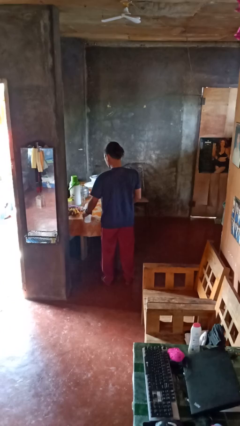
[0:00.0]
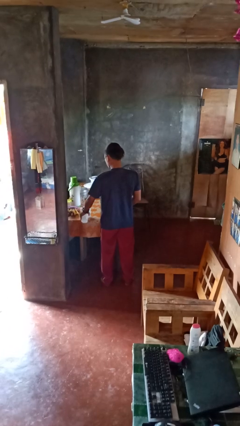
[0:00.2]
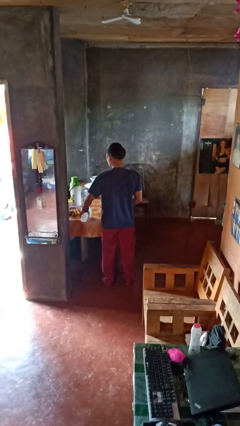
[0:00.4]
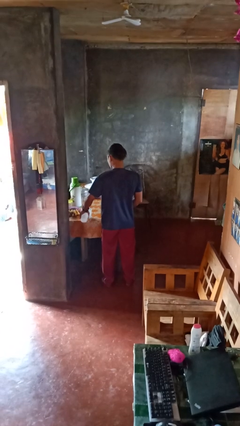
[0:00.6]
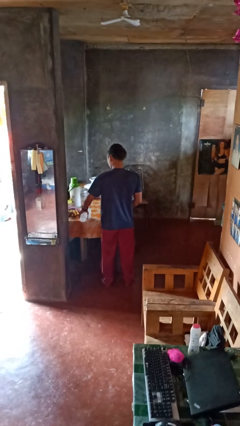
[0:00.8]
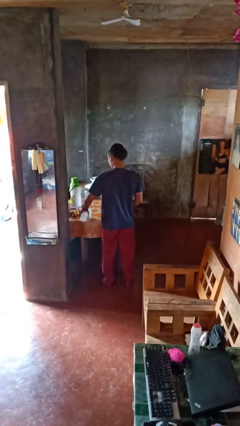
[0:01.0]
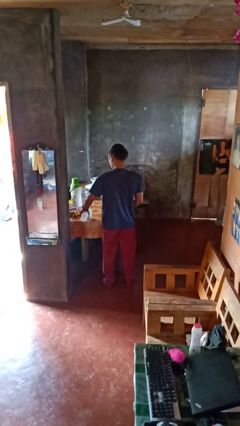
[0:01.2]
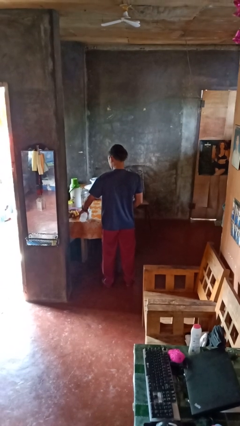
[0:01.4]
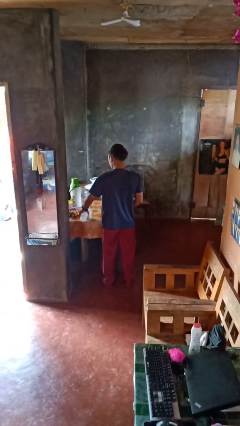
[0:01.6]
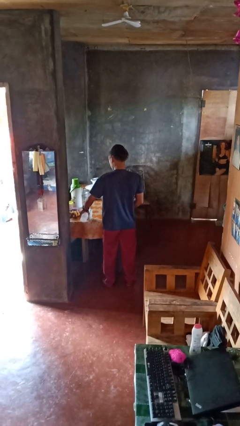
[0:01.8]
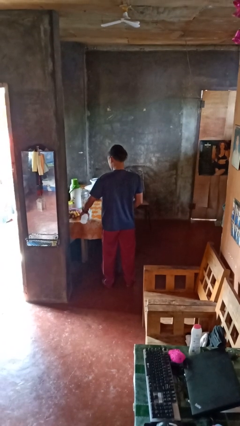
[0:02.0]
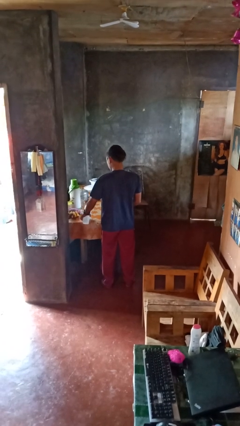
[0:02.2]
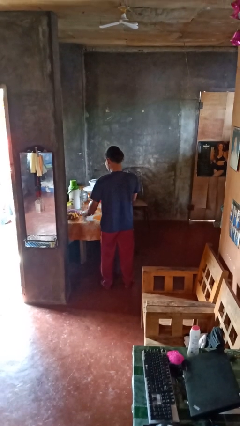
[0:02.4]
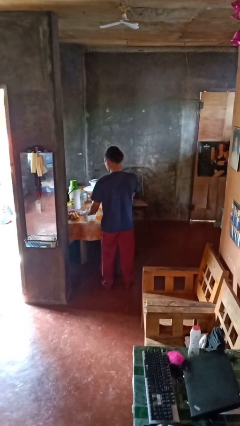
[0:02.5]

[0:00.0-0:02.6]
person pours liquid into cup

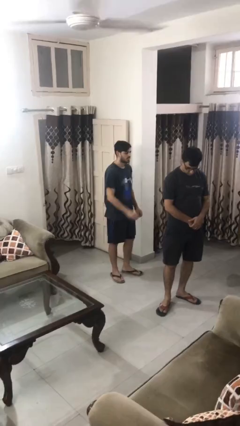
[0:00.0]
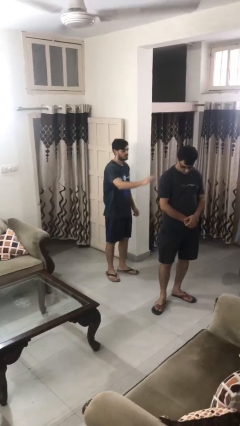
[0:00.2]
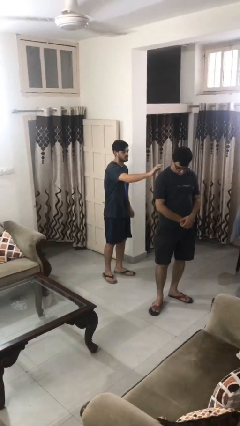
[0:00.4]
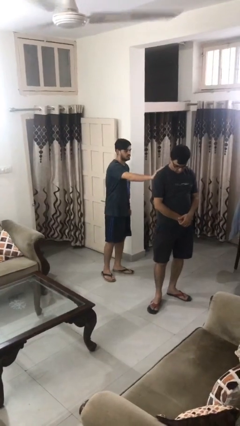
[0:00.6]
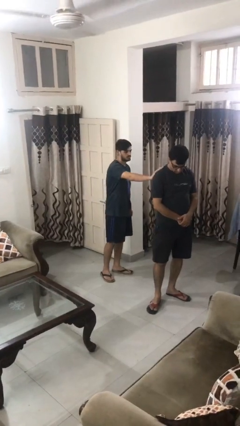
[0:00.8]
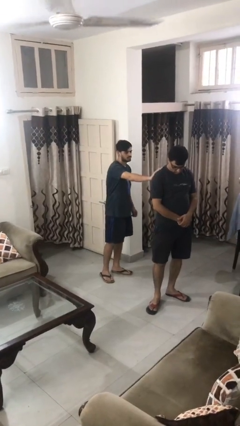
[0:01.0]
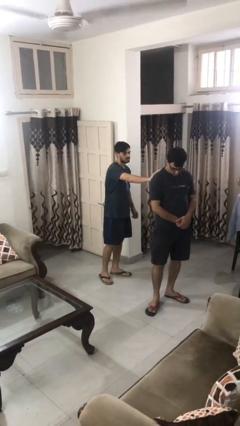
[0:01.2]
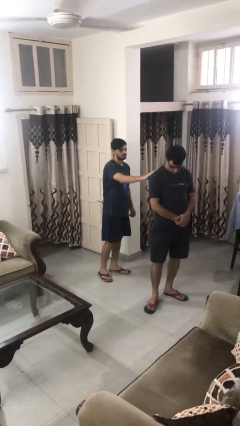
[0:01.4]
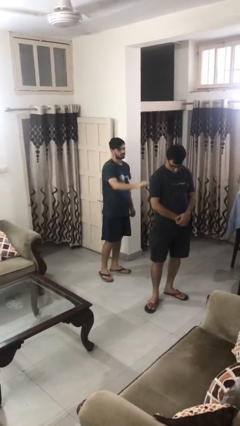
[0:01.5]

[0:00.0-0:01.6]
person touches back of person

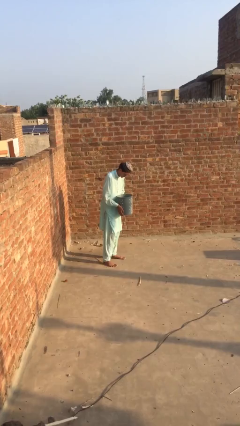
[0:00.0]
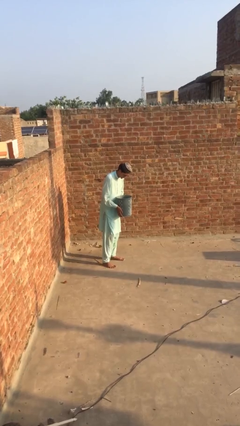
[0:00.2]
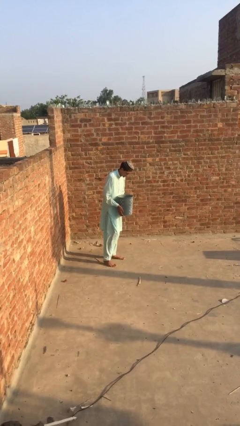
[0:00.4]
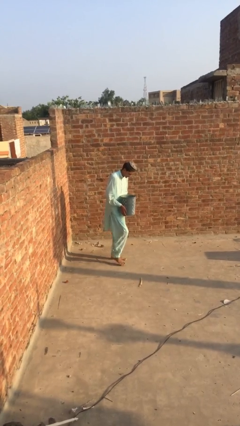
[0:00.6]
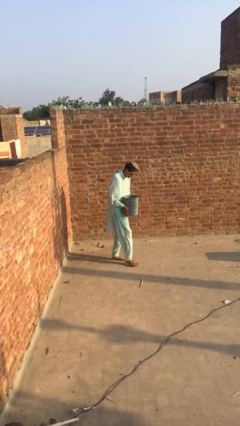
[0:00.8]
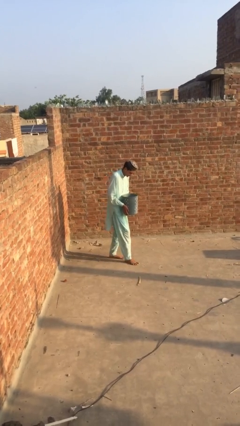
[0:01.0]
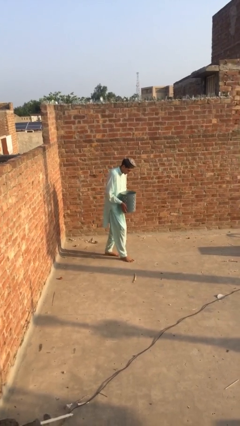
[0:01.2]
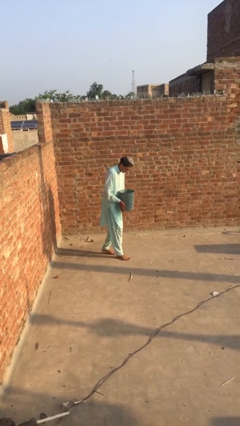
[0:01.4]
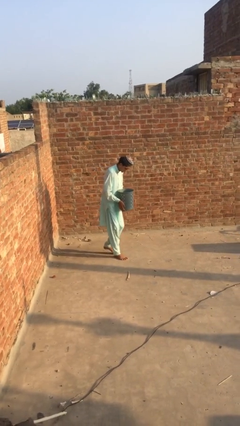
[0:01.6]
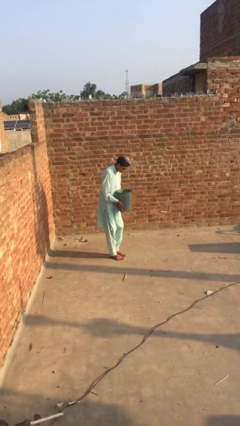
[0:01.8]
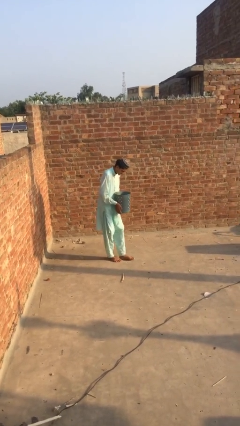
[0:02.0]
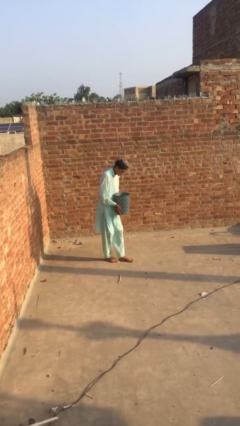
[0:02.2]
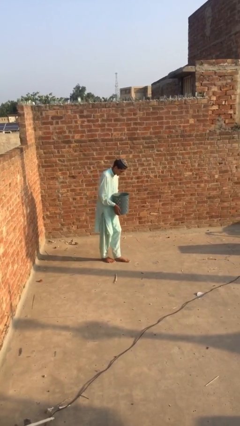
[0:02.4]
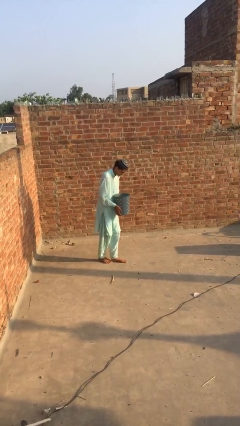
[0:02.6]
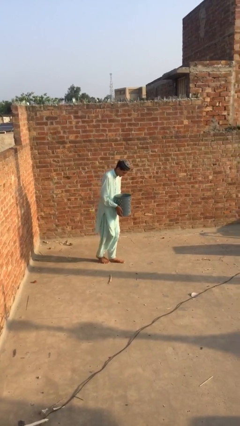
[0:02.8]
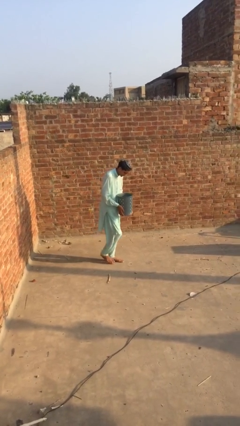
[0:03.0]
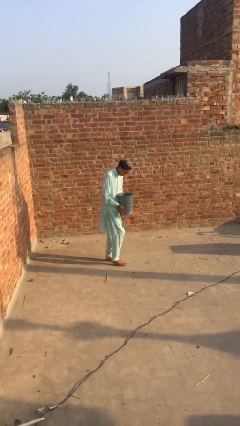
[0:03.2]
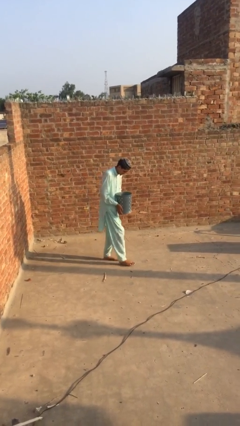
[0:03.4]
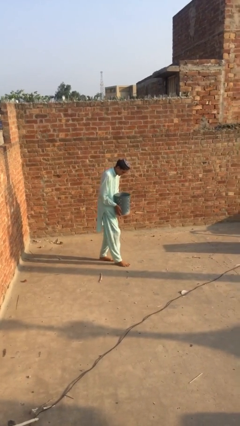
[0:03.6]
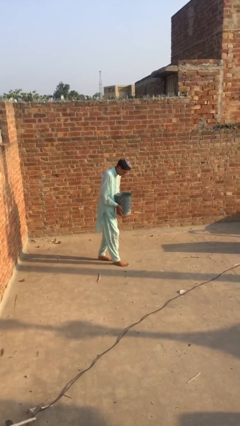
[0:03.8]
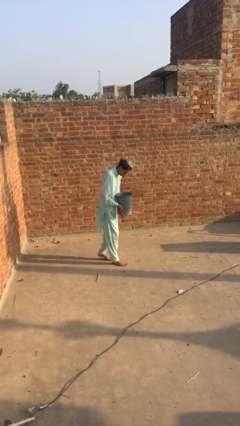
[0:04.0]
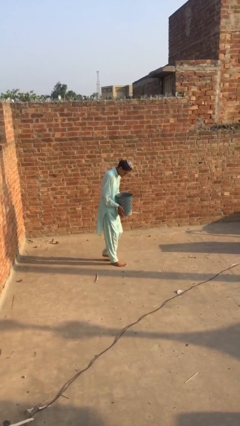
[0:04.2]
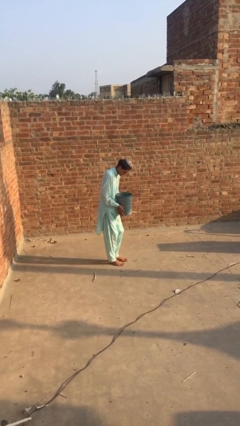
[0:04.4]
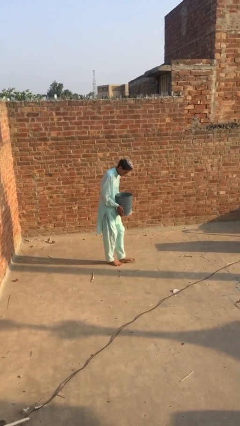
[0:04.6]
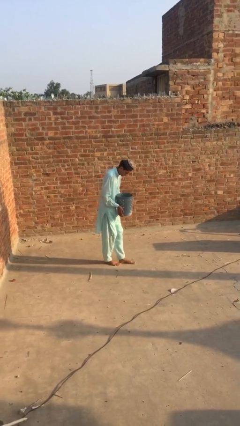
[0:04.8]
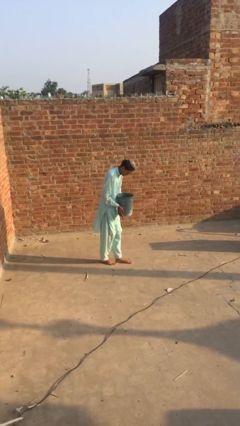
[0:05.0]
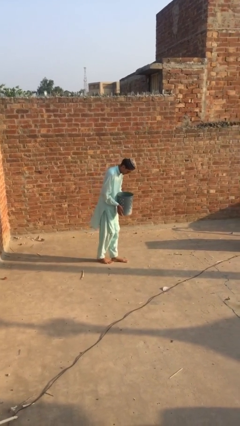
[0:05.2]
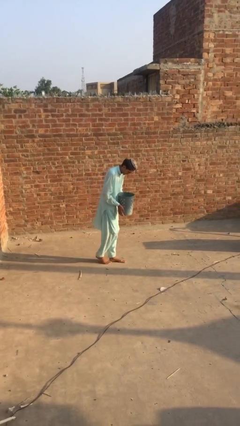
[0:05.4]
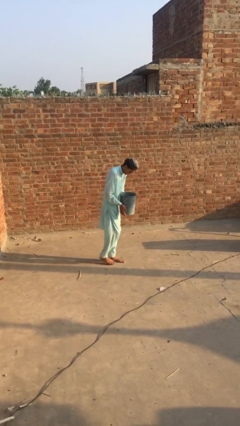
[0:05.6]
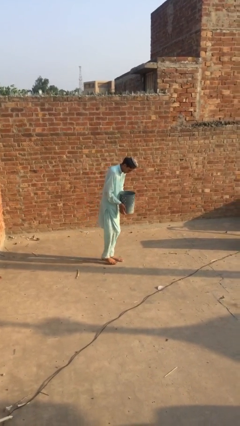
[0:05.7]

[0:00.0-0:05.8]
person carries heavy object

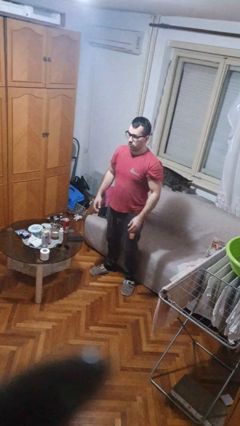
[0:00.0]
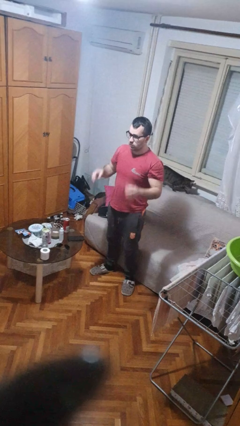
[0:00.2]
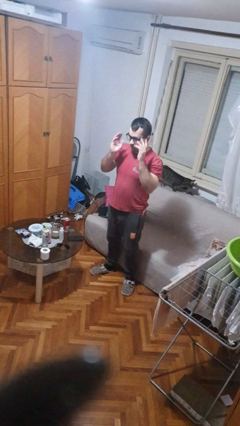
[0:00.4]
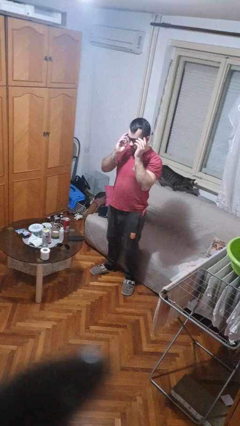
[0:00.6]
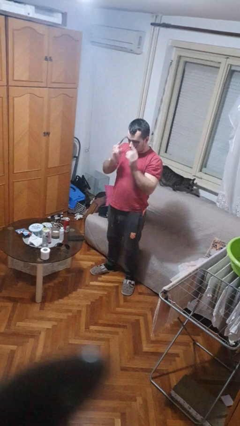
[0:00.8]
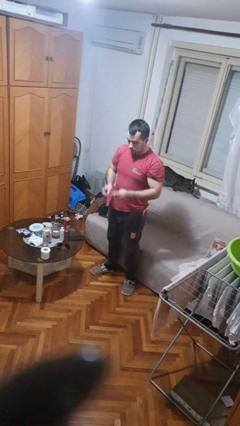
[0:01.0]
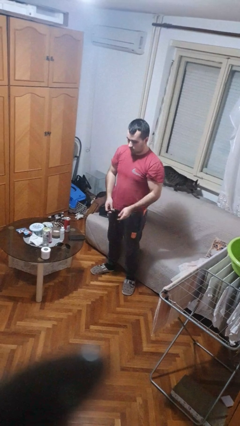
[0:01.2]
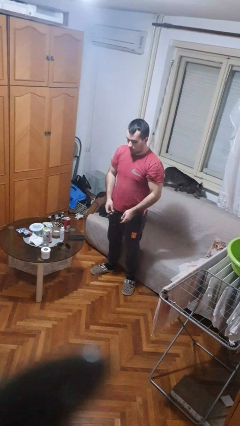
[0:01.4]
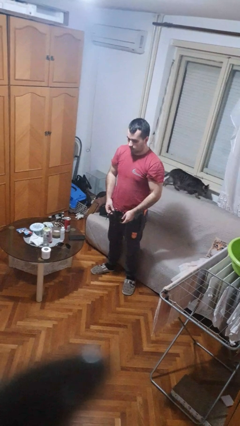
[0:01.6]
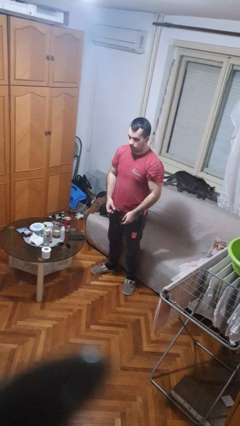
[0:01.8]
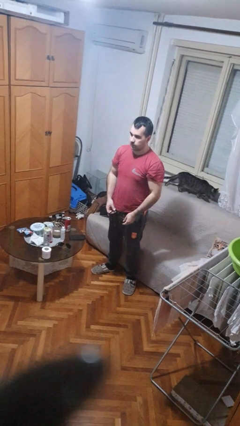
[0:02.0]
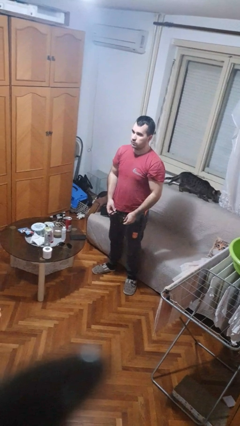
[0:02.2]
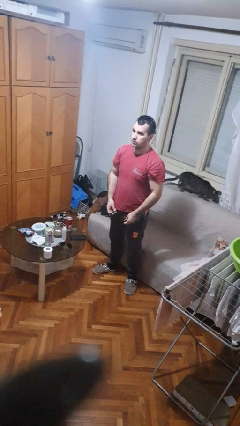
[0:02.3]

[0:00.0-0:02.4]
person takes off glasses

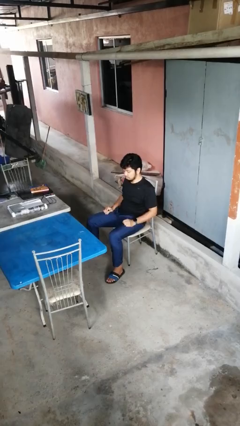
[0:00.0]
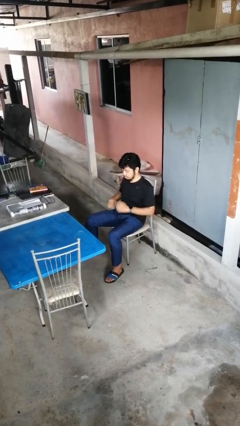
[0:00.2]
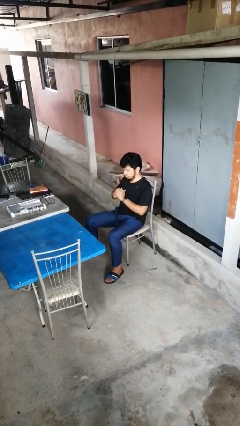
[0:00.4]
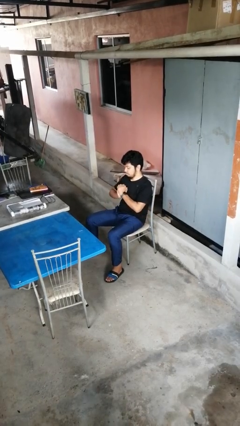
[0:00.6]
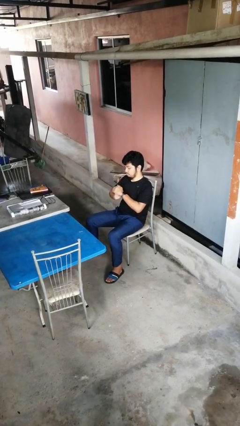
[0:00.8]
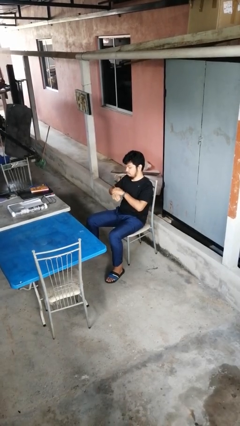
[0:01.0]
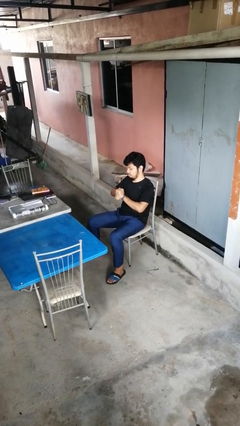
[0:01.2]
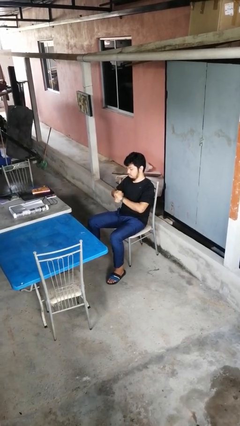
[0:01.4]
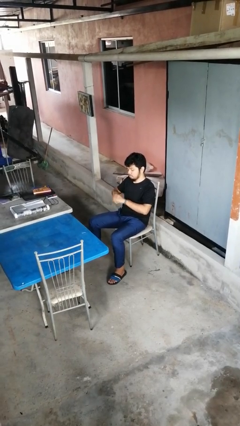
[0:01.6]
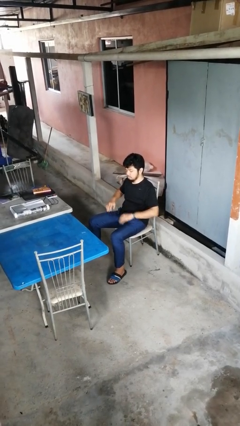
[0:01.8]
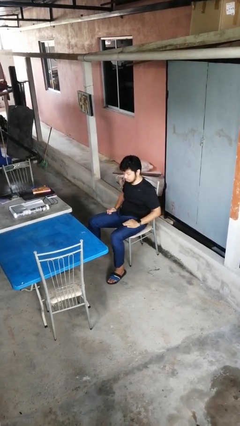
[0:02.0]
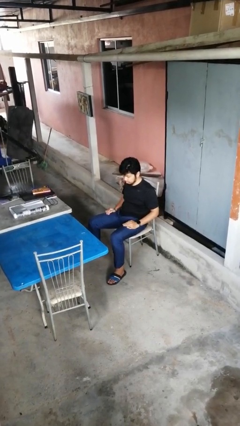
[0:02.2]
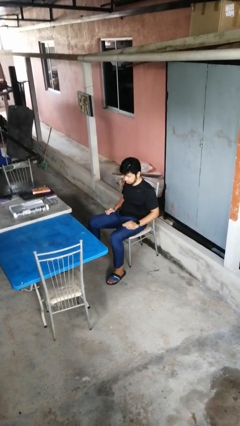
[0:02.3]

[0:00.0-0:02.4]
person cracks knuckles

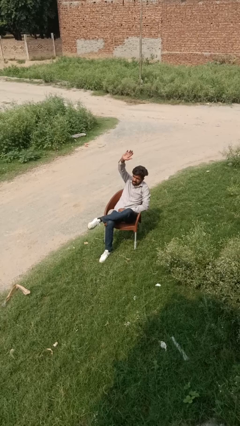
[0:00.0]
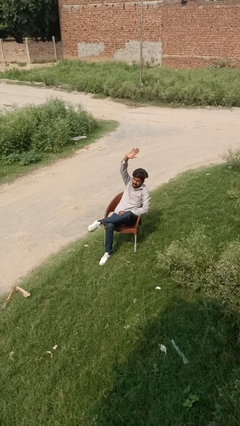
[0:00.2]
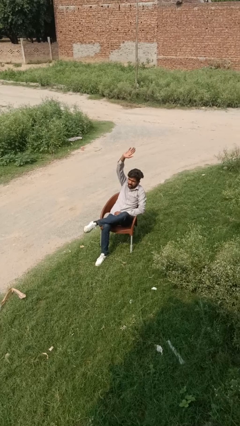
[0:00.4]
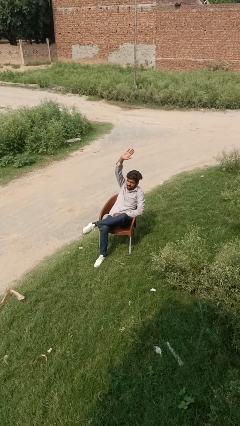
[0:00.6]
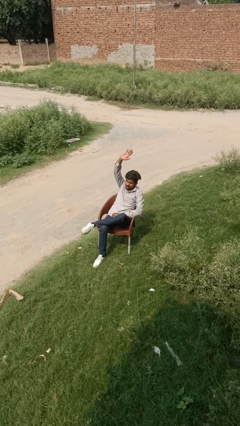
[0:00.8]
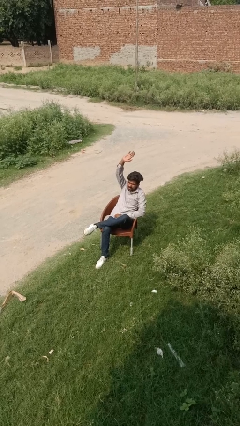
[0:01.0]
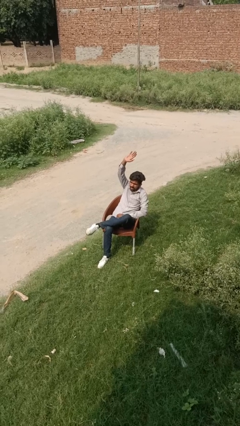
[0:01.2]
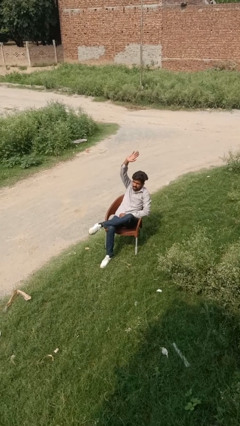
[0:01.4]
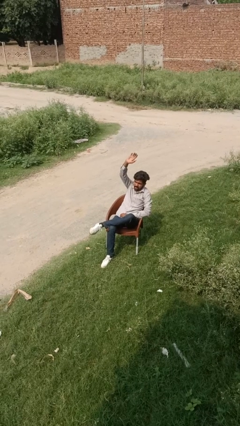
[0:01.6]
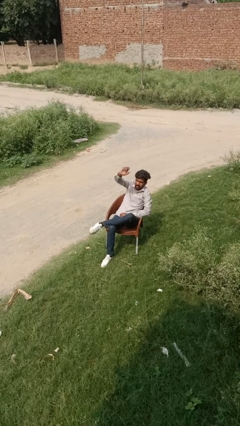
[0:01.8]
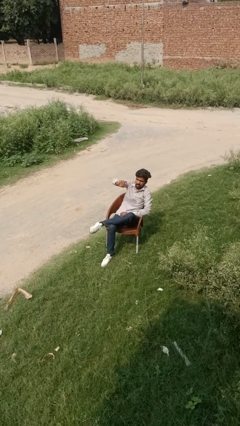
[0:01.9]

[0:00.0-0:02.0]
person gestures raise hand

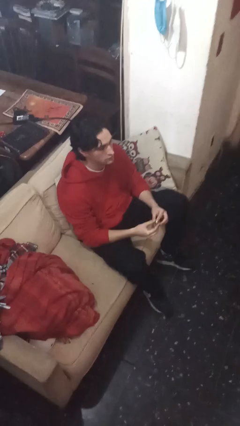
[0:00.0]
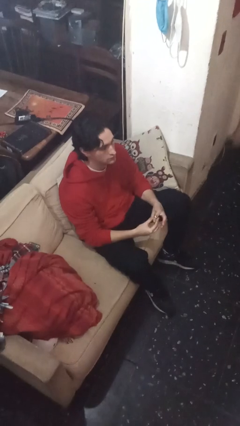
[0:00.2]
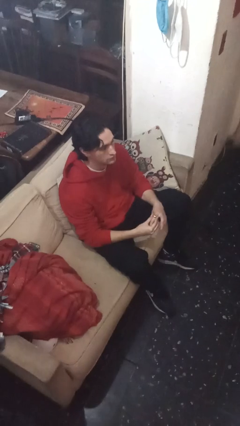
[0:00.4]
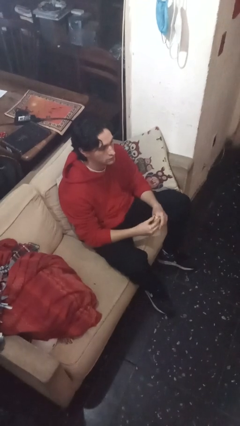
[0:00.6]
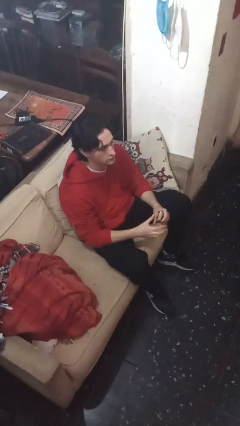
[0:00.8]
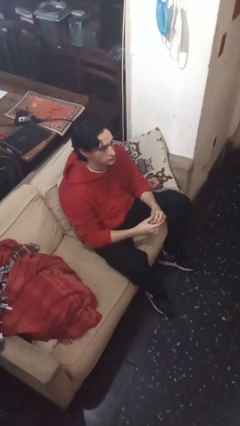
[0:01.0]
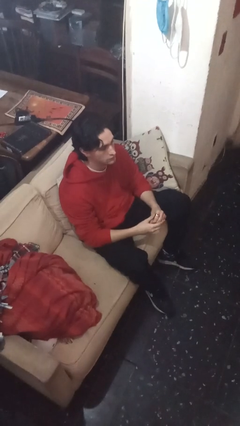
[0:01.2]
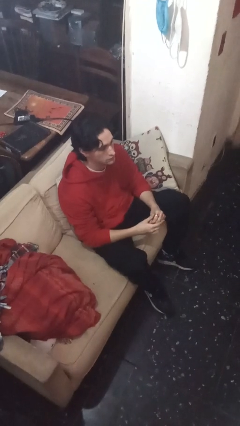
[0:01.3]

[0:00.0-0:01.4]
person puts on ring
